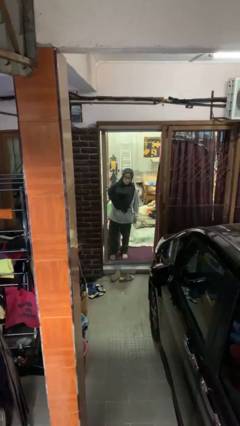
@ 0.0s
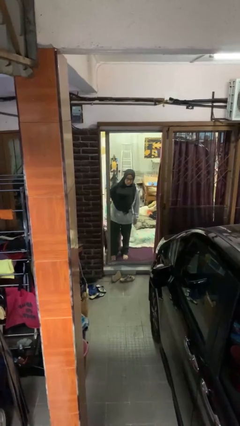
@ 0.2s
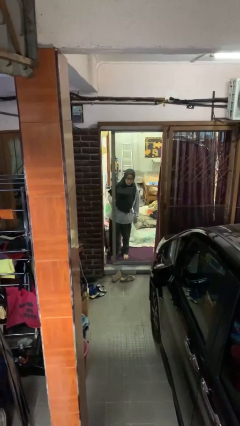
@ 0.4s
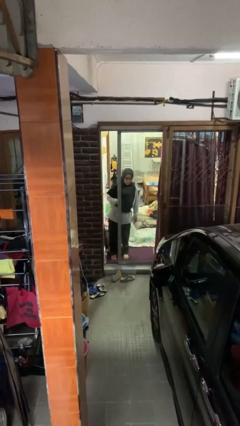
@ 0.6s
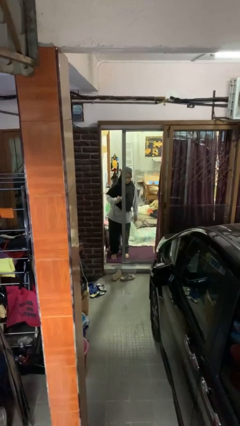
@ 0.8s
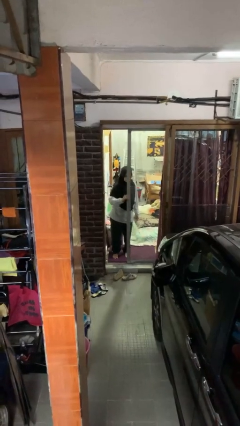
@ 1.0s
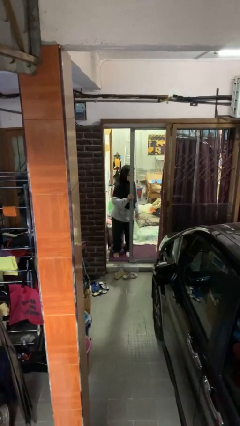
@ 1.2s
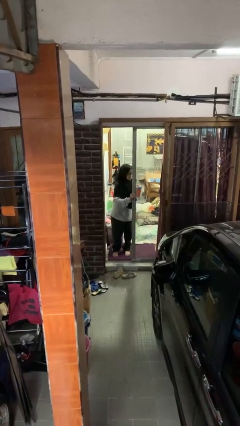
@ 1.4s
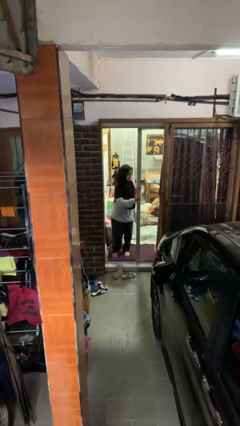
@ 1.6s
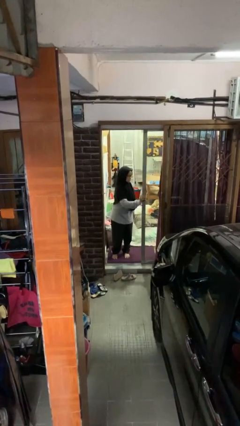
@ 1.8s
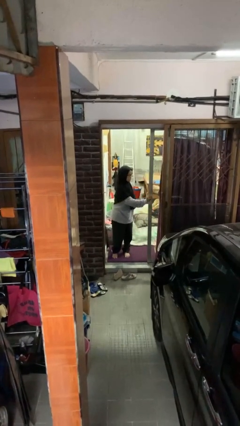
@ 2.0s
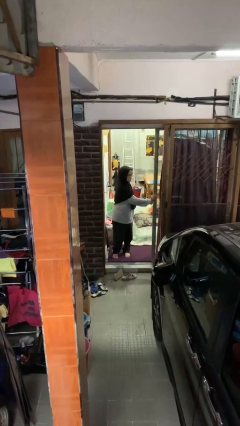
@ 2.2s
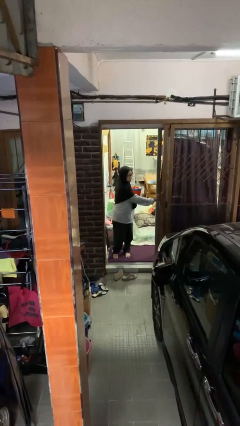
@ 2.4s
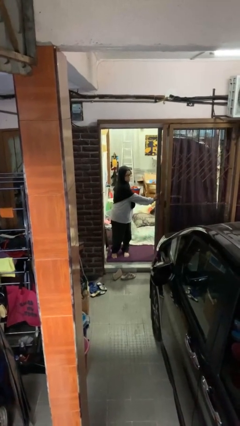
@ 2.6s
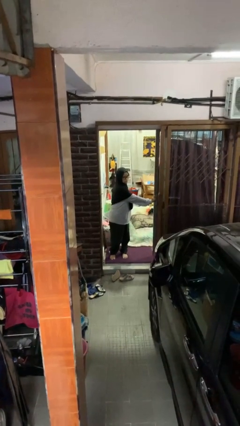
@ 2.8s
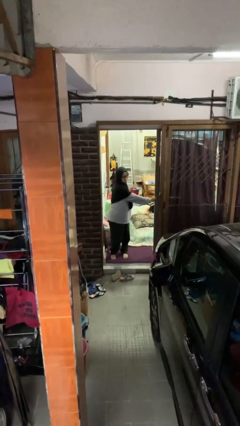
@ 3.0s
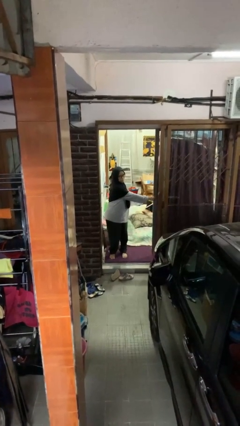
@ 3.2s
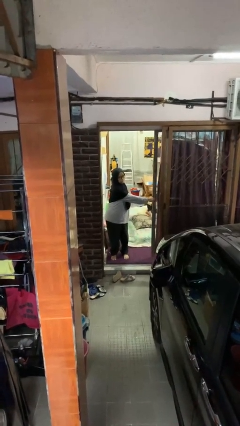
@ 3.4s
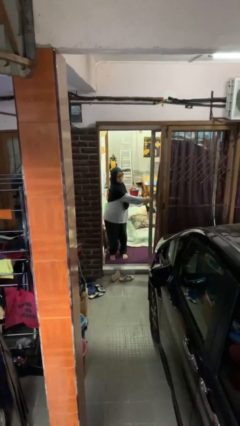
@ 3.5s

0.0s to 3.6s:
person opens sliding door

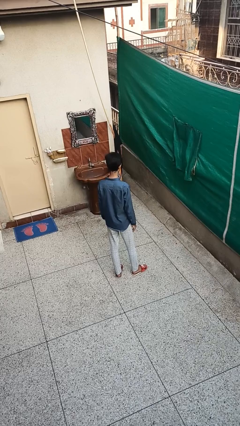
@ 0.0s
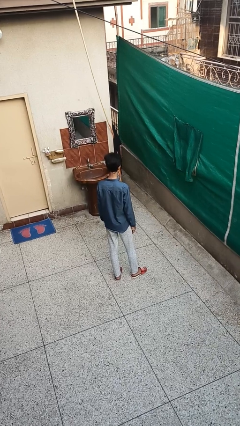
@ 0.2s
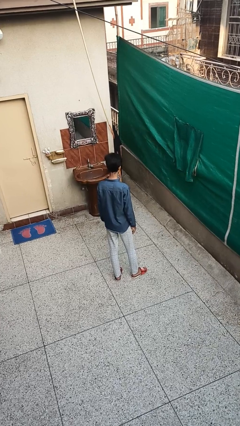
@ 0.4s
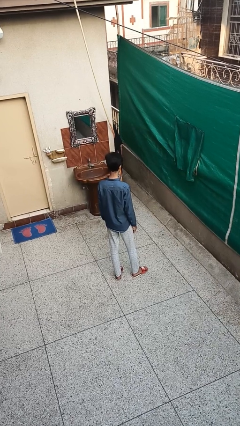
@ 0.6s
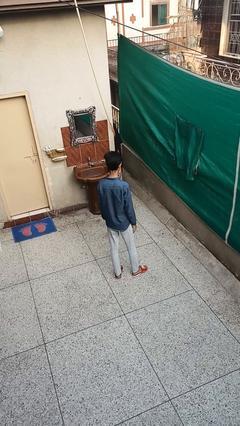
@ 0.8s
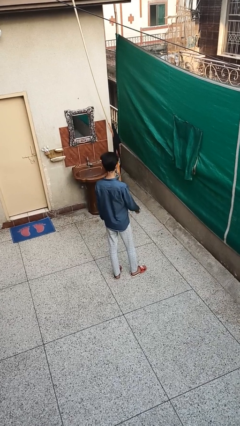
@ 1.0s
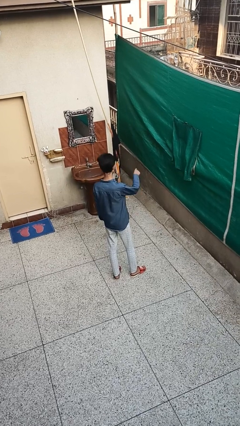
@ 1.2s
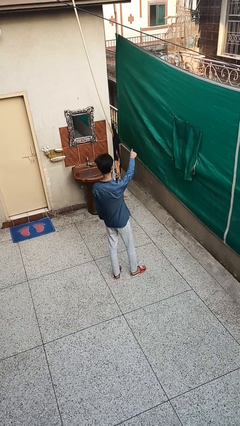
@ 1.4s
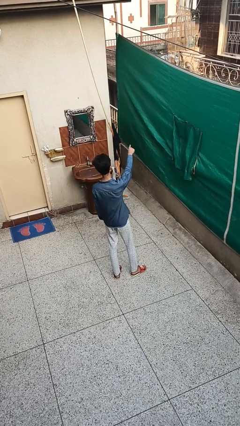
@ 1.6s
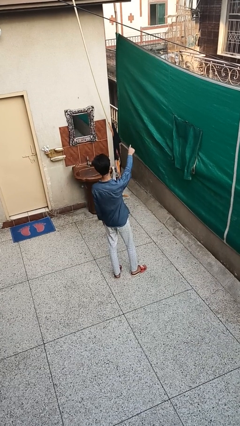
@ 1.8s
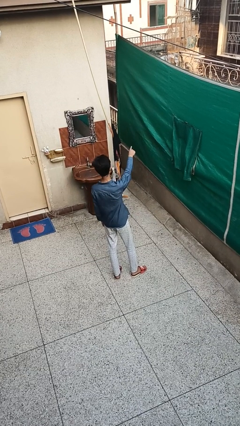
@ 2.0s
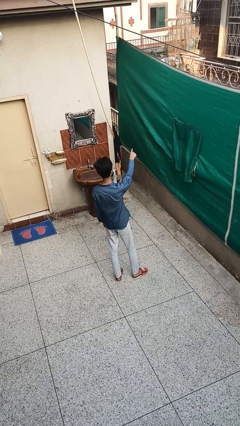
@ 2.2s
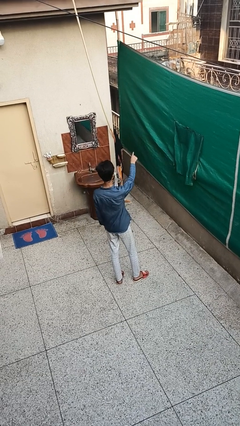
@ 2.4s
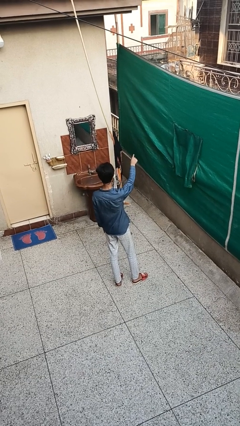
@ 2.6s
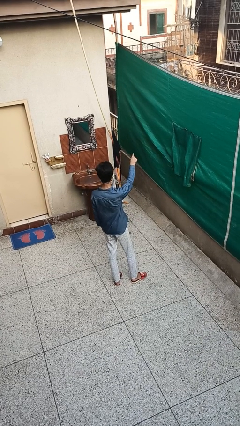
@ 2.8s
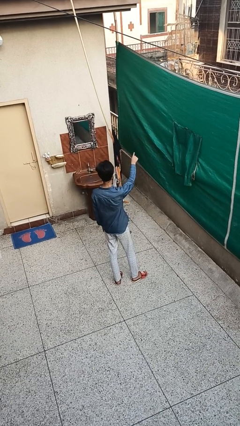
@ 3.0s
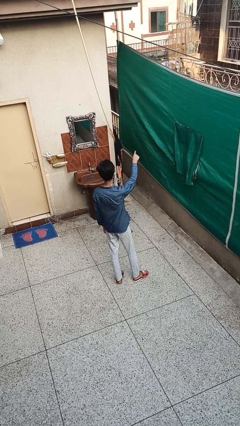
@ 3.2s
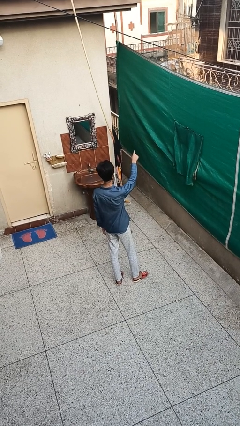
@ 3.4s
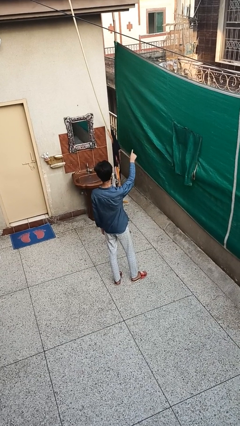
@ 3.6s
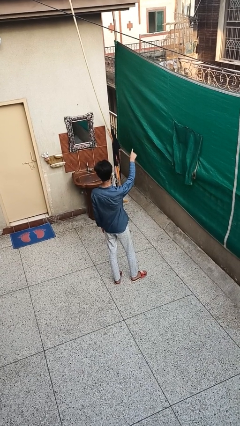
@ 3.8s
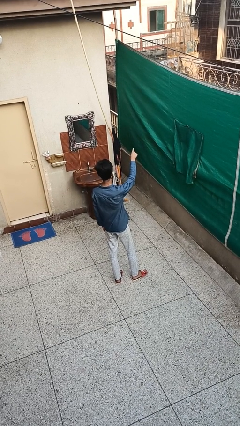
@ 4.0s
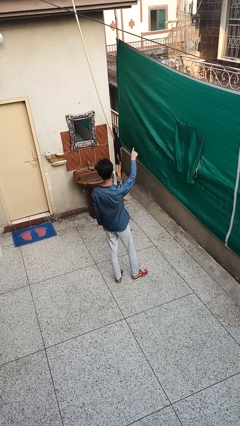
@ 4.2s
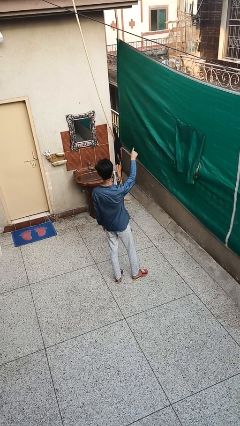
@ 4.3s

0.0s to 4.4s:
person points at person

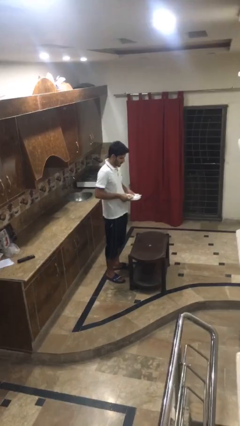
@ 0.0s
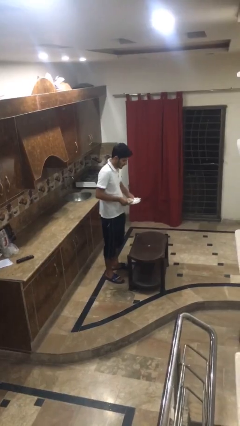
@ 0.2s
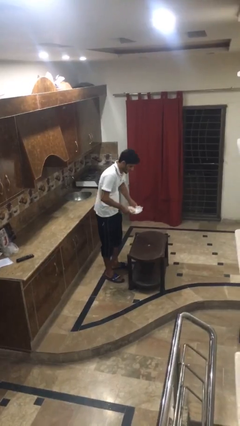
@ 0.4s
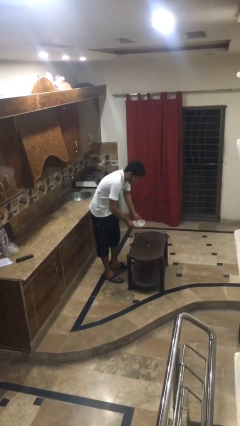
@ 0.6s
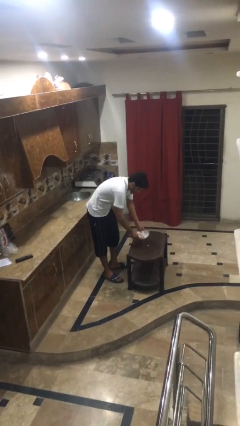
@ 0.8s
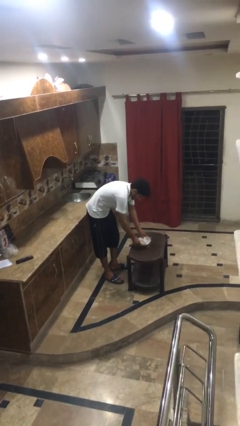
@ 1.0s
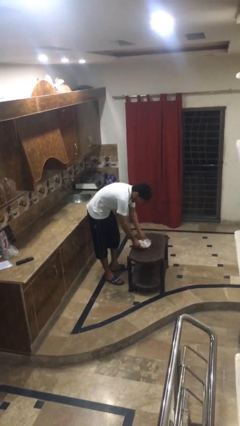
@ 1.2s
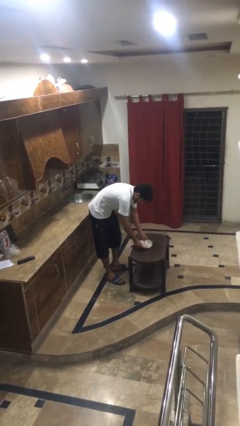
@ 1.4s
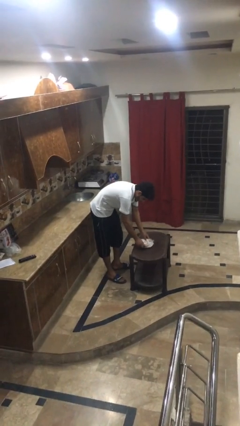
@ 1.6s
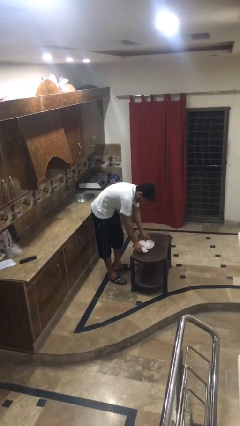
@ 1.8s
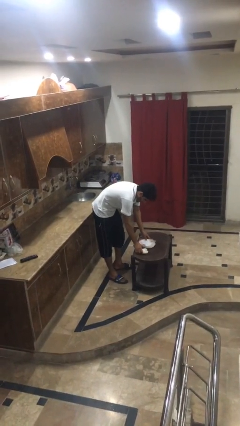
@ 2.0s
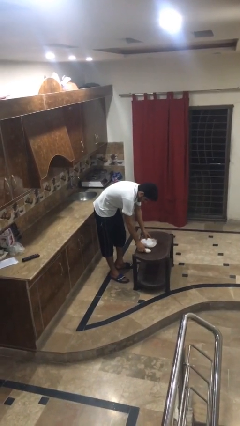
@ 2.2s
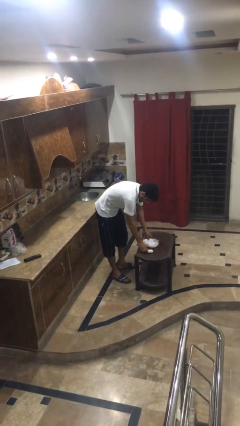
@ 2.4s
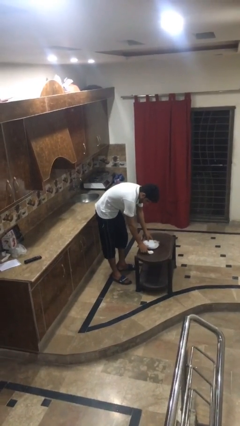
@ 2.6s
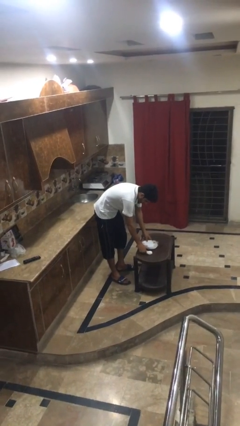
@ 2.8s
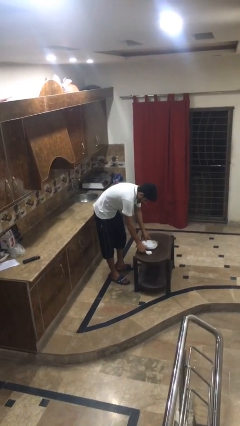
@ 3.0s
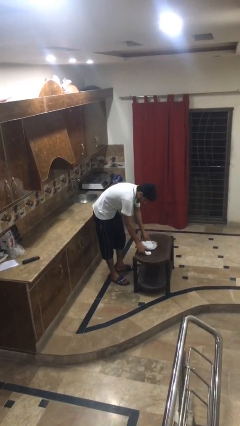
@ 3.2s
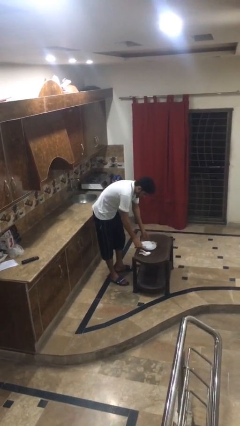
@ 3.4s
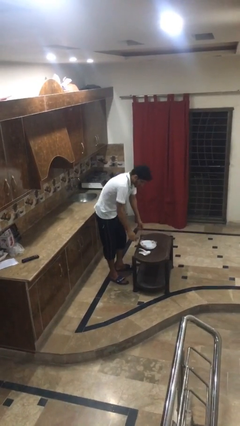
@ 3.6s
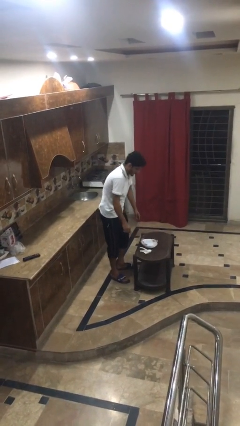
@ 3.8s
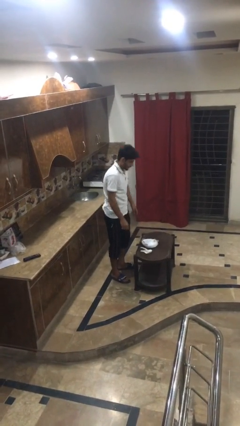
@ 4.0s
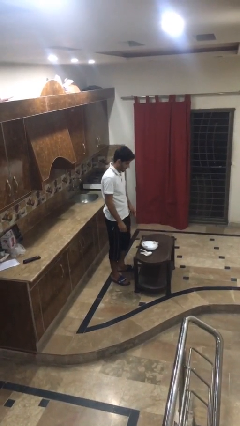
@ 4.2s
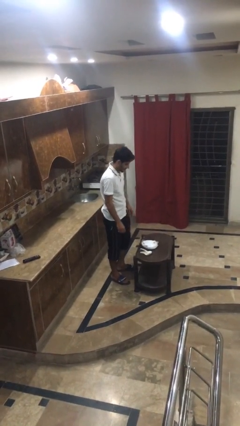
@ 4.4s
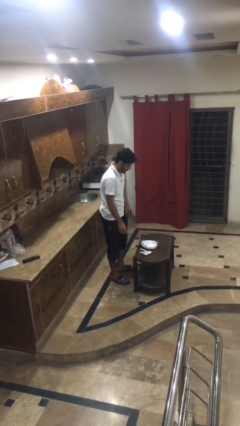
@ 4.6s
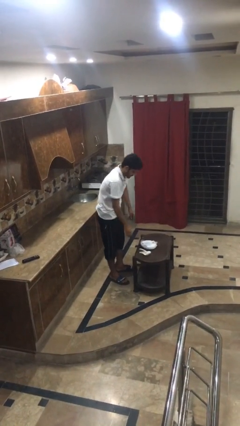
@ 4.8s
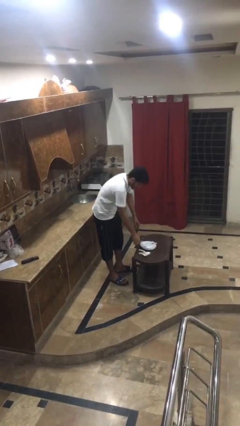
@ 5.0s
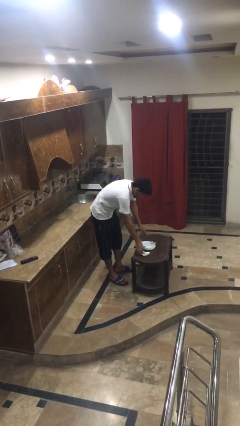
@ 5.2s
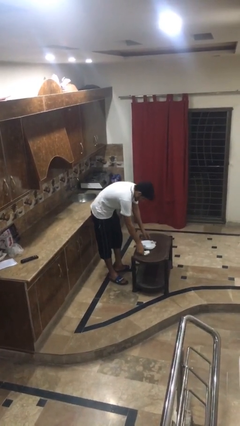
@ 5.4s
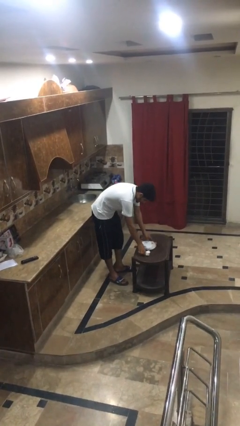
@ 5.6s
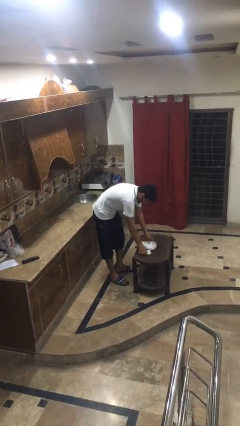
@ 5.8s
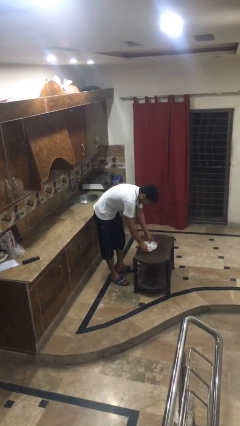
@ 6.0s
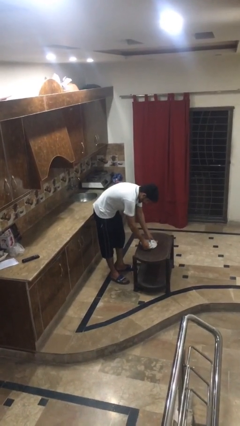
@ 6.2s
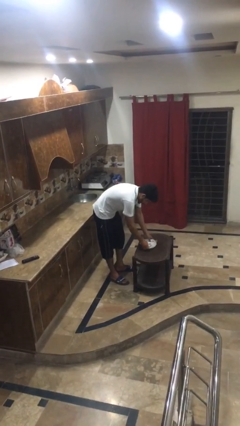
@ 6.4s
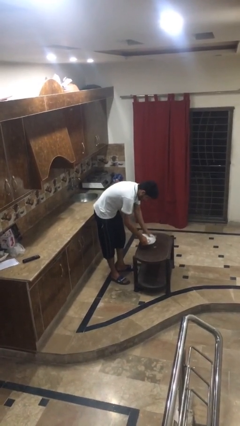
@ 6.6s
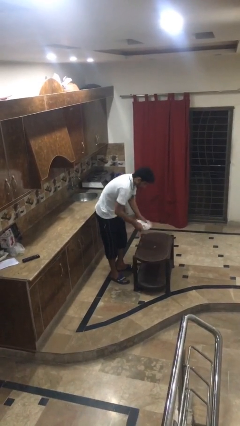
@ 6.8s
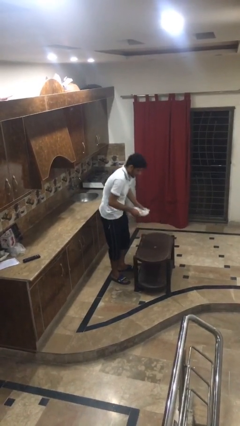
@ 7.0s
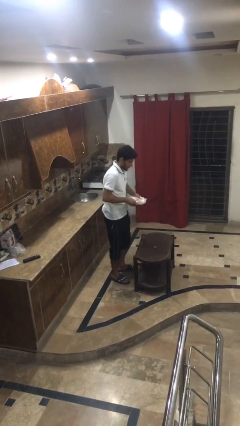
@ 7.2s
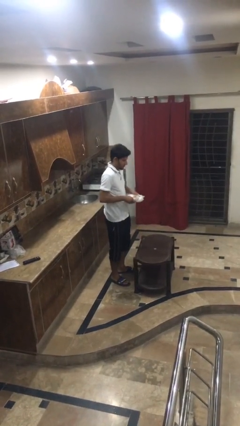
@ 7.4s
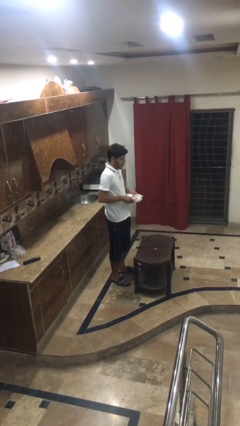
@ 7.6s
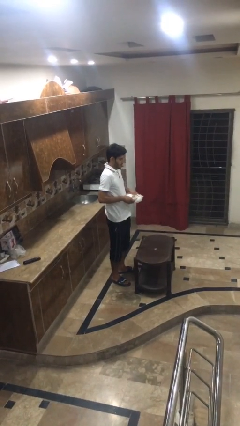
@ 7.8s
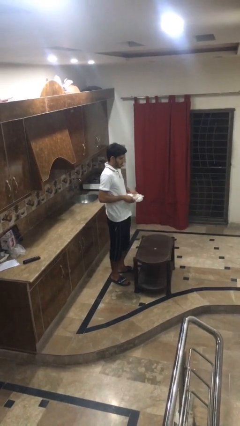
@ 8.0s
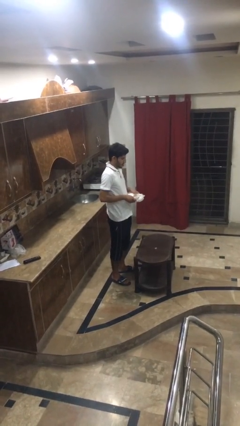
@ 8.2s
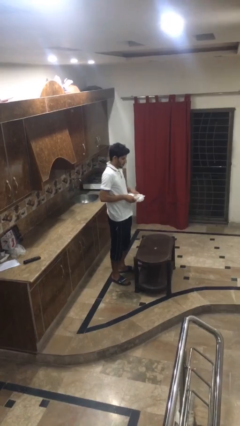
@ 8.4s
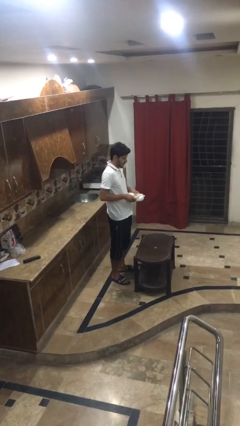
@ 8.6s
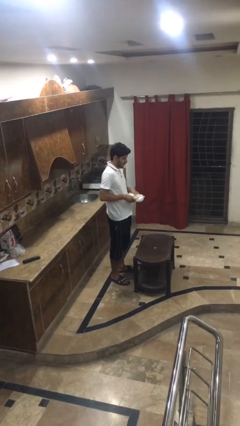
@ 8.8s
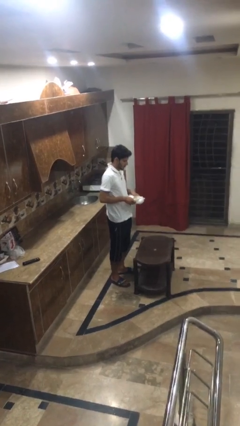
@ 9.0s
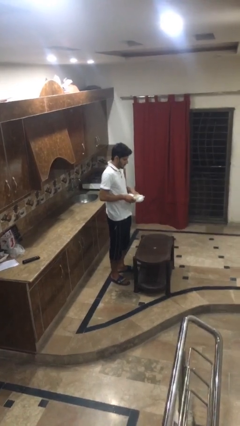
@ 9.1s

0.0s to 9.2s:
person sets table

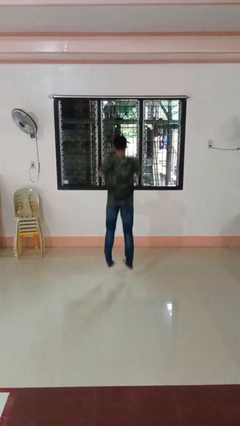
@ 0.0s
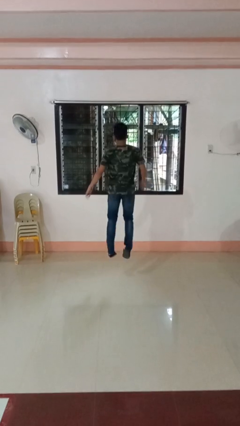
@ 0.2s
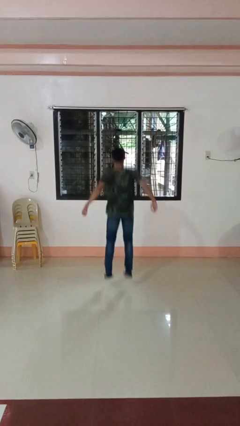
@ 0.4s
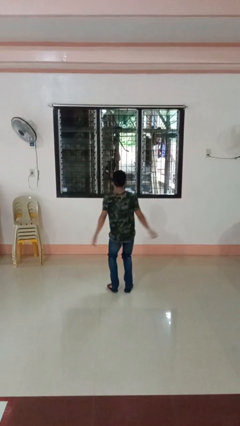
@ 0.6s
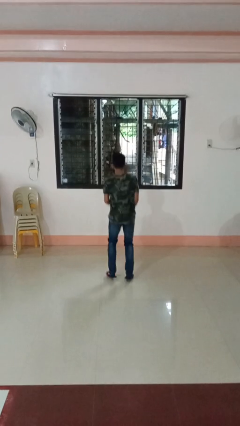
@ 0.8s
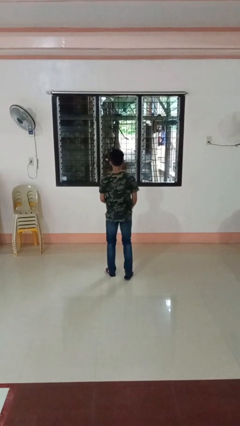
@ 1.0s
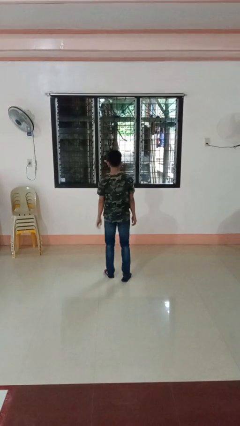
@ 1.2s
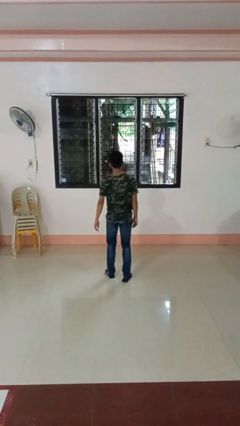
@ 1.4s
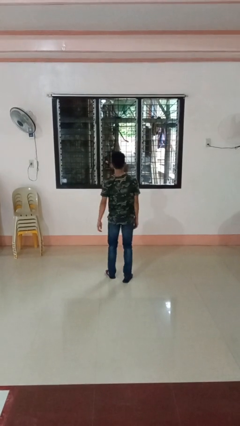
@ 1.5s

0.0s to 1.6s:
person jumps
